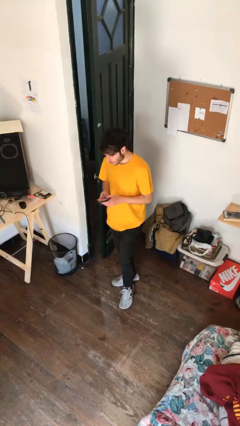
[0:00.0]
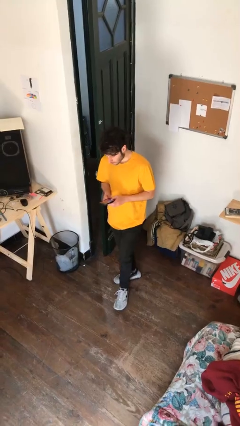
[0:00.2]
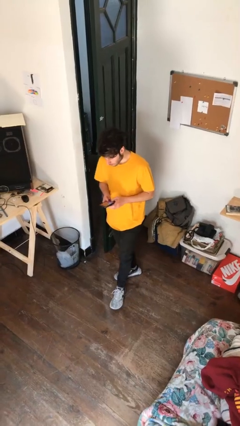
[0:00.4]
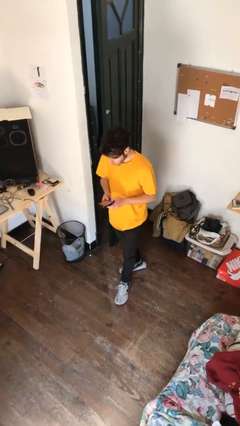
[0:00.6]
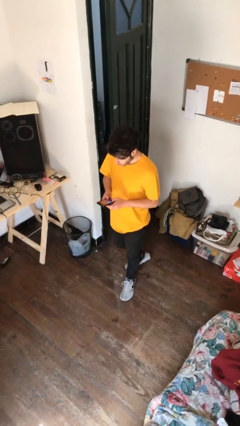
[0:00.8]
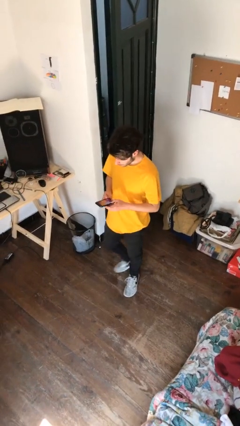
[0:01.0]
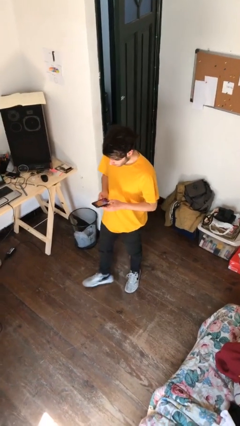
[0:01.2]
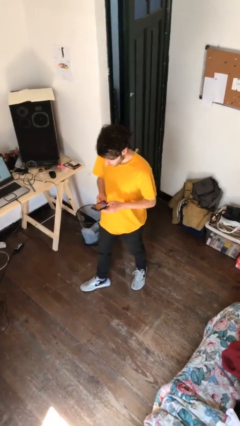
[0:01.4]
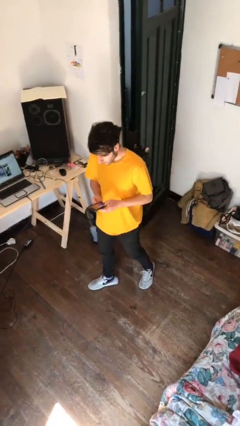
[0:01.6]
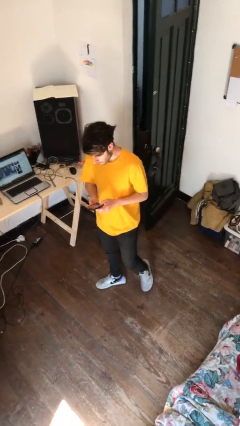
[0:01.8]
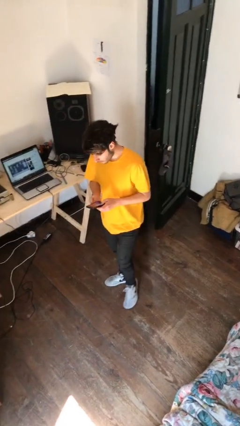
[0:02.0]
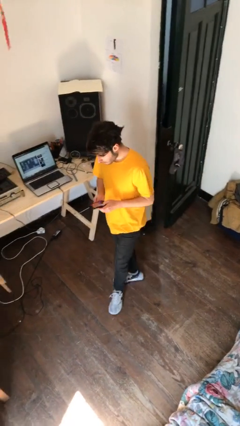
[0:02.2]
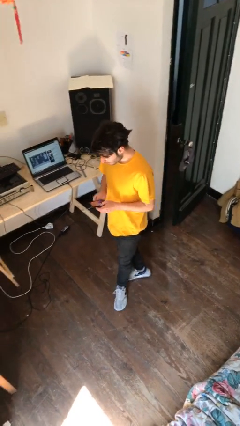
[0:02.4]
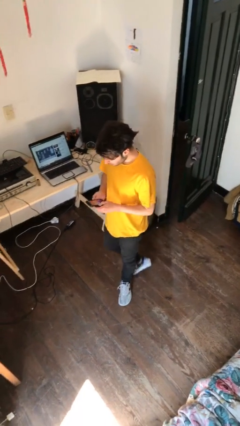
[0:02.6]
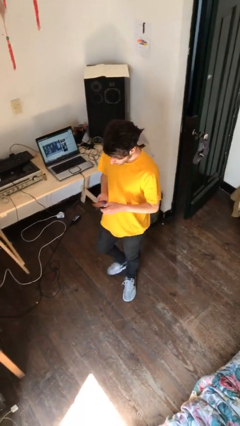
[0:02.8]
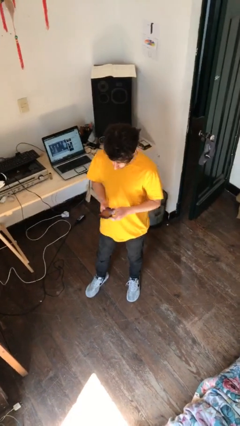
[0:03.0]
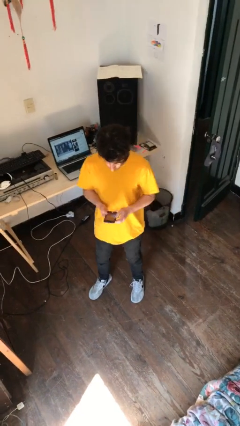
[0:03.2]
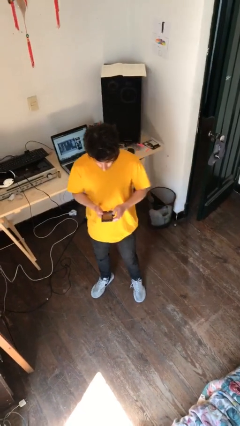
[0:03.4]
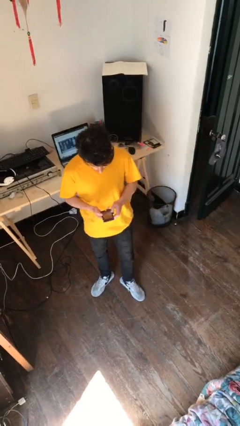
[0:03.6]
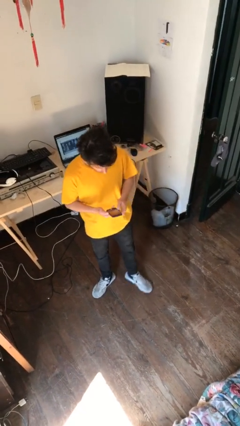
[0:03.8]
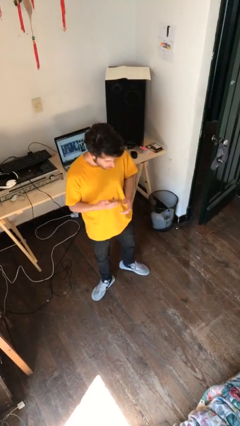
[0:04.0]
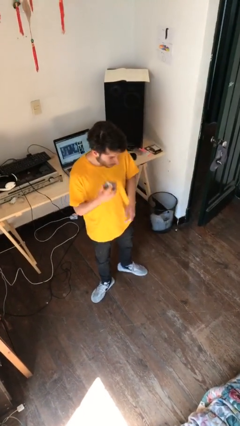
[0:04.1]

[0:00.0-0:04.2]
person texts on phone

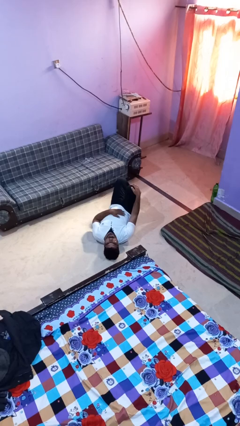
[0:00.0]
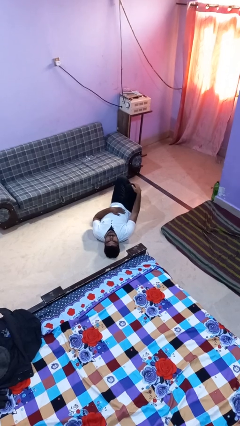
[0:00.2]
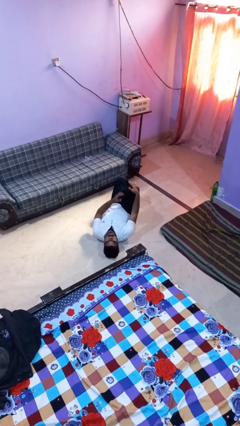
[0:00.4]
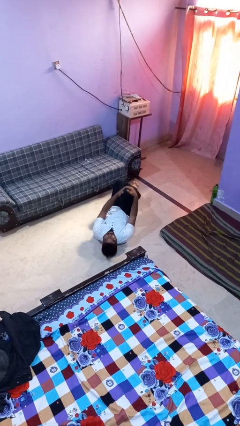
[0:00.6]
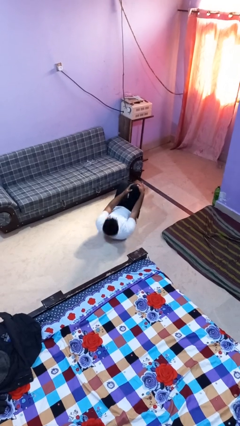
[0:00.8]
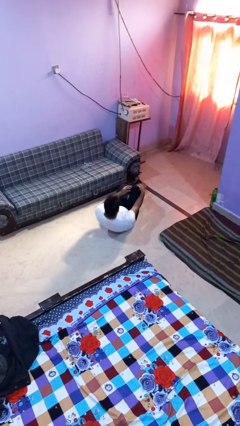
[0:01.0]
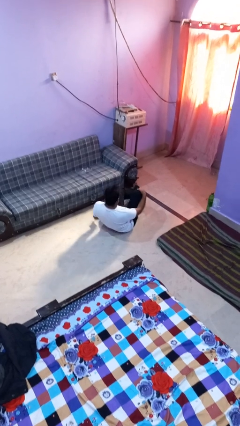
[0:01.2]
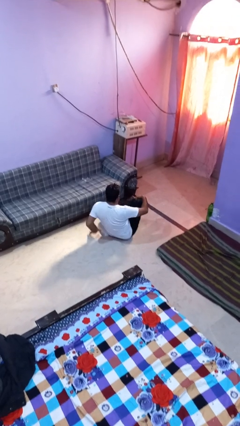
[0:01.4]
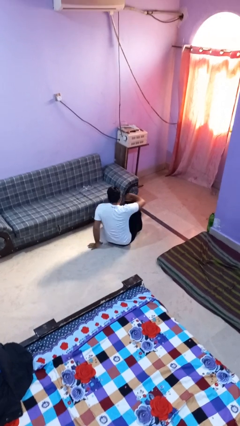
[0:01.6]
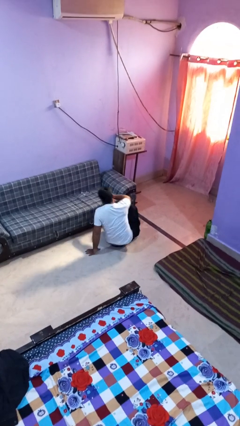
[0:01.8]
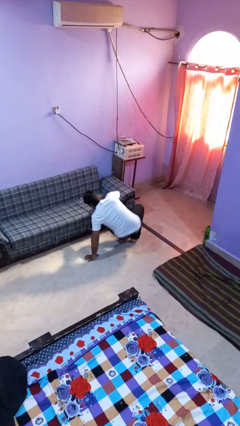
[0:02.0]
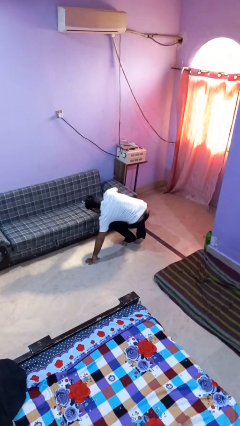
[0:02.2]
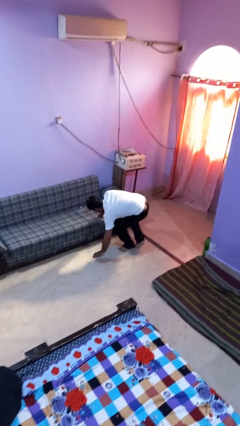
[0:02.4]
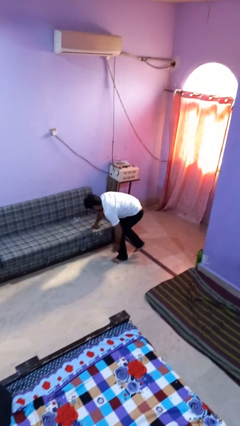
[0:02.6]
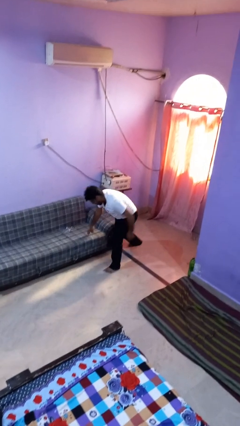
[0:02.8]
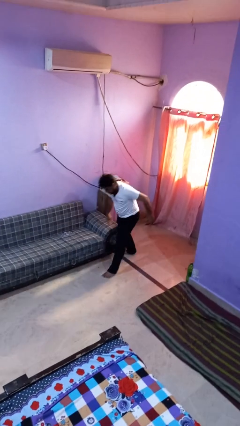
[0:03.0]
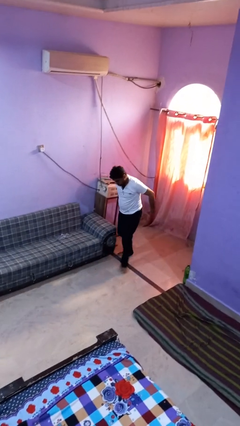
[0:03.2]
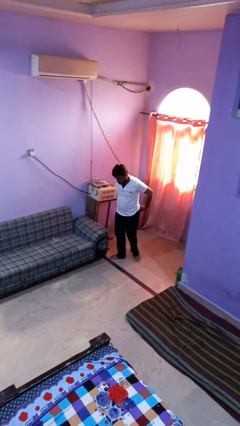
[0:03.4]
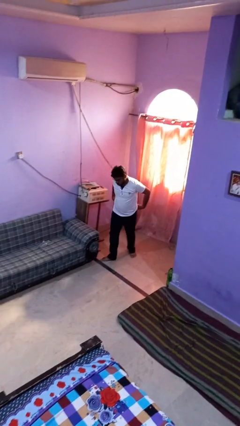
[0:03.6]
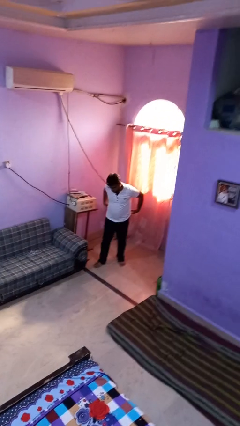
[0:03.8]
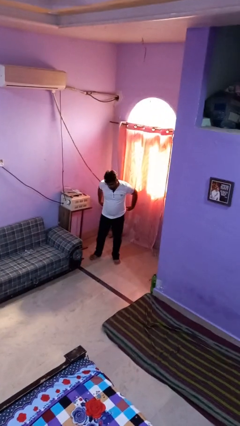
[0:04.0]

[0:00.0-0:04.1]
person stands up from floor

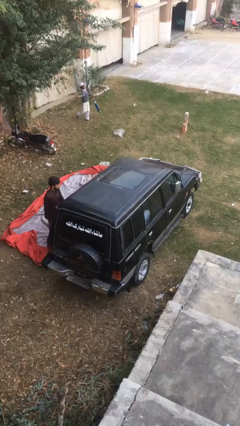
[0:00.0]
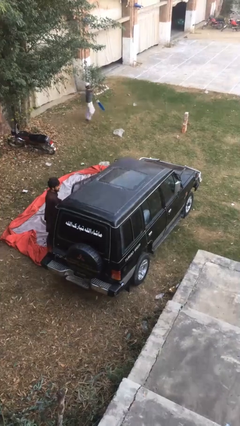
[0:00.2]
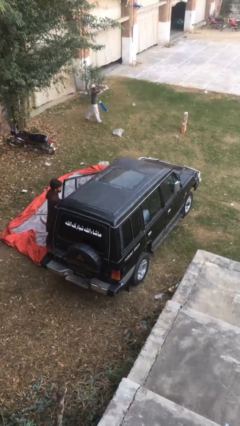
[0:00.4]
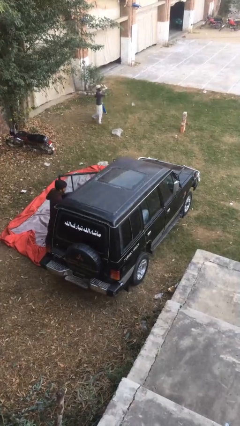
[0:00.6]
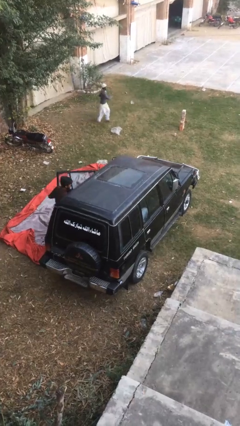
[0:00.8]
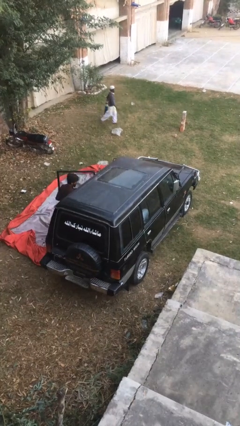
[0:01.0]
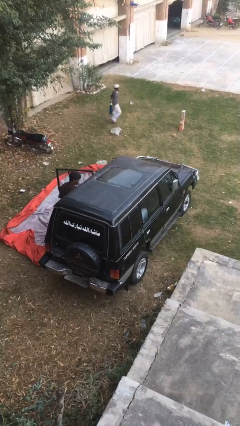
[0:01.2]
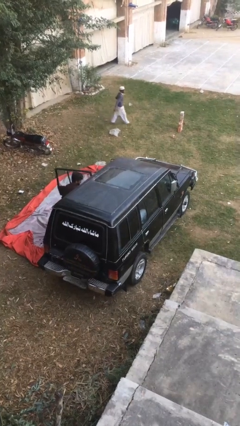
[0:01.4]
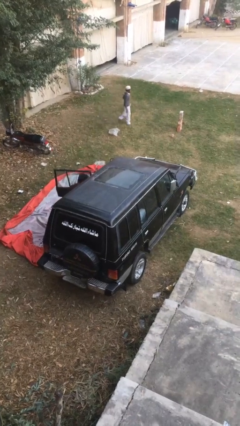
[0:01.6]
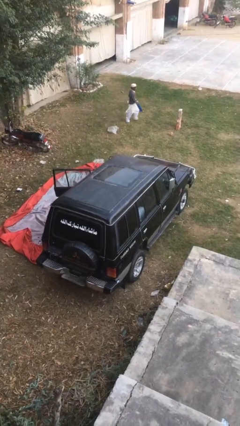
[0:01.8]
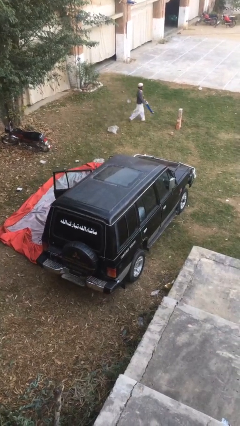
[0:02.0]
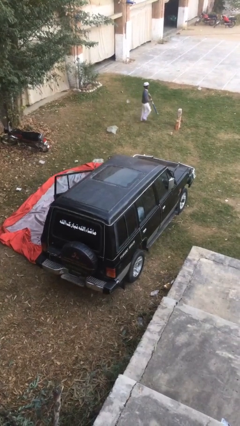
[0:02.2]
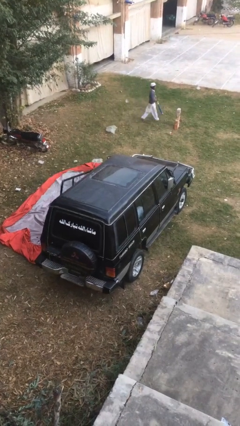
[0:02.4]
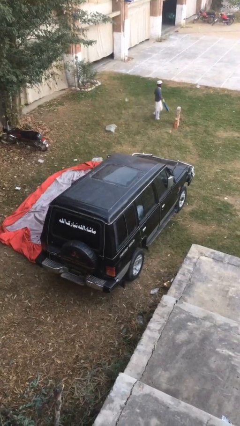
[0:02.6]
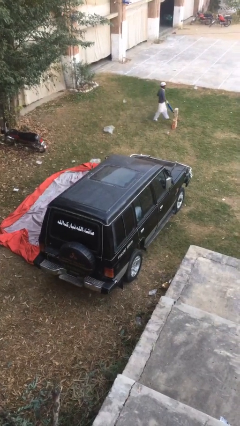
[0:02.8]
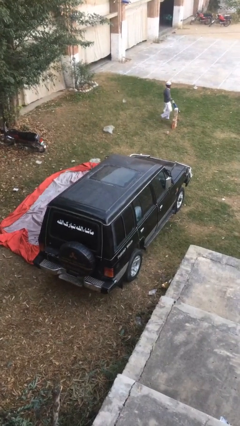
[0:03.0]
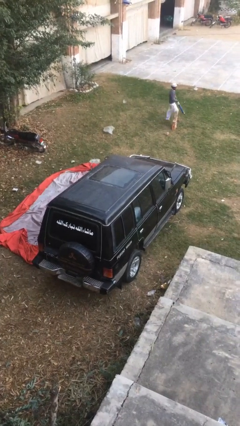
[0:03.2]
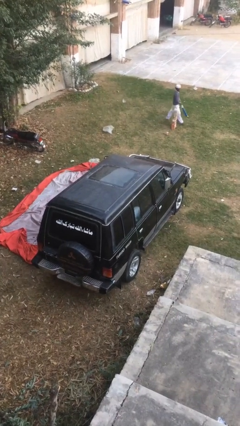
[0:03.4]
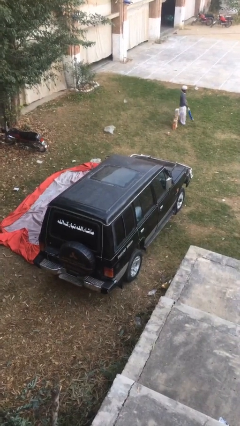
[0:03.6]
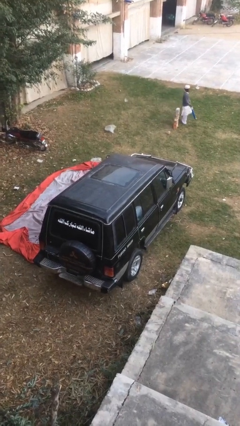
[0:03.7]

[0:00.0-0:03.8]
car picks up person

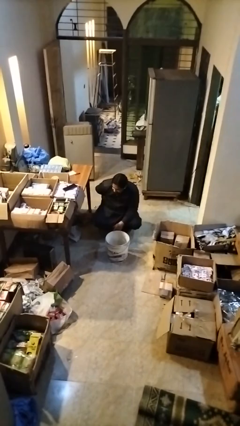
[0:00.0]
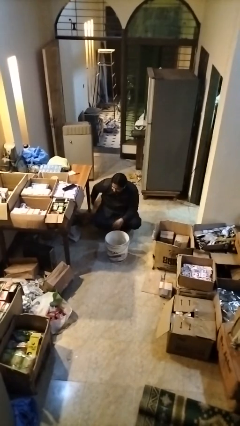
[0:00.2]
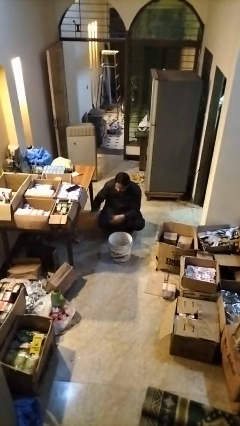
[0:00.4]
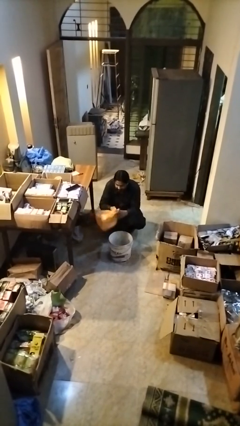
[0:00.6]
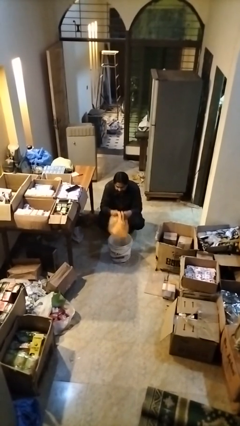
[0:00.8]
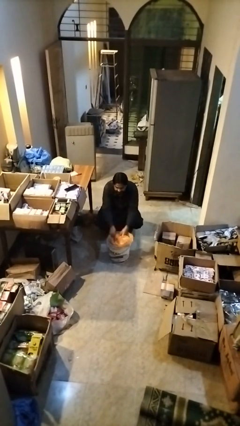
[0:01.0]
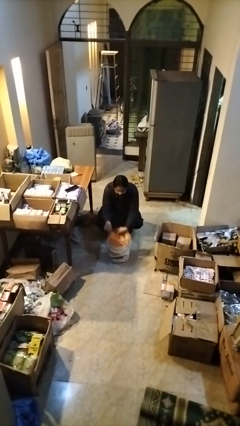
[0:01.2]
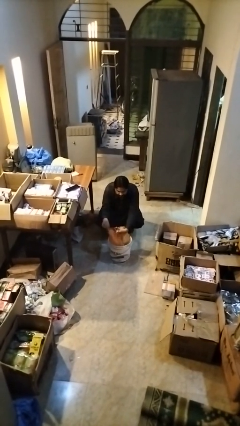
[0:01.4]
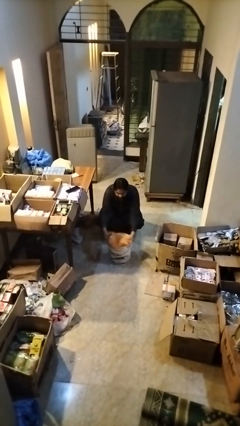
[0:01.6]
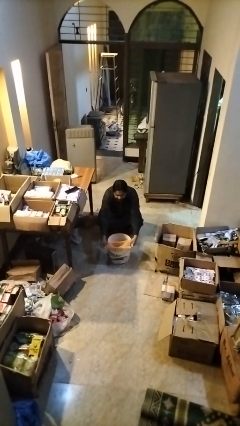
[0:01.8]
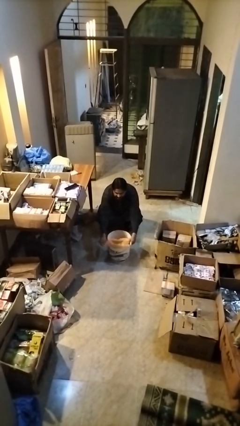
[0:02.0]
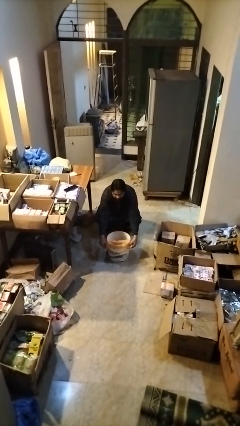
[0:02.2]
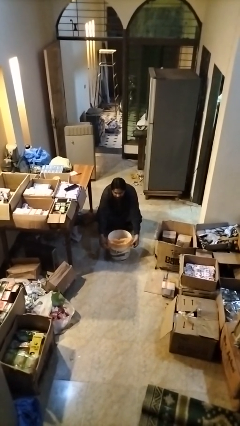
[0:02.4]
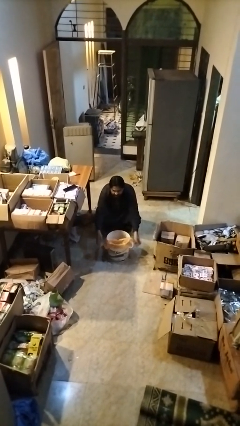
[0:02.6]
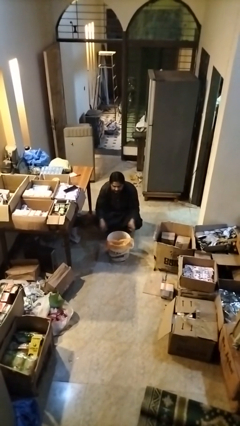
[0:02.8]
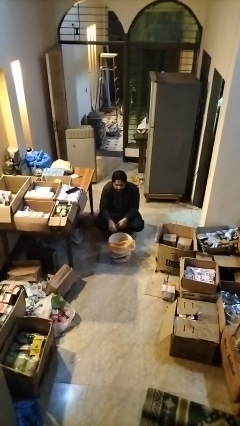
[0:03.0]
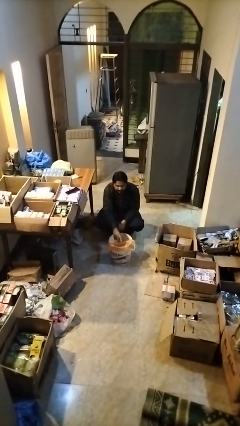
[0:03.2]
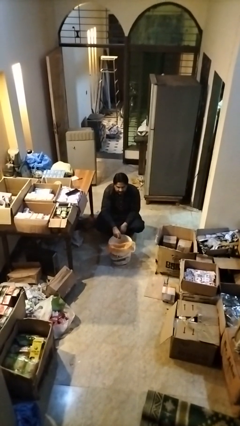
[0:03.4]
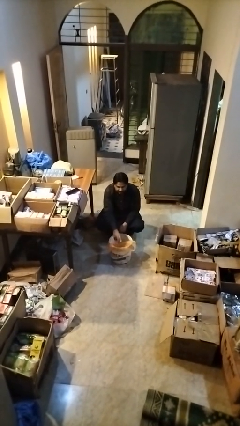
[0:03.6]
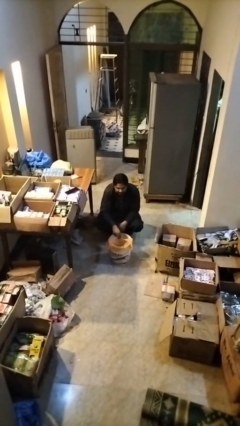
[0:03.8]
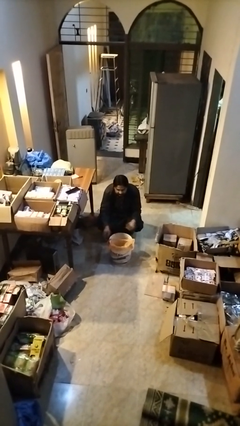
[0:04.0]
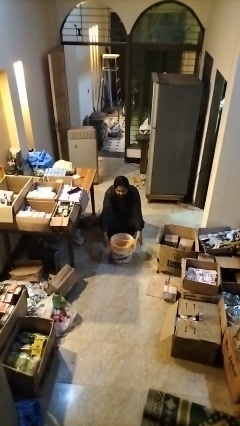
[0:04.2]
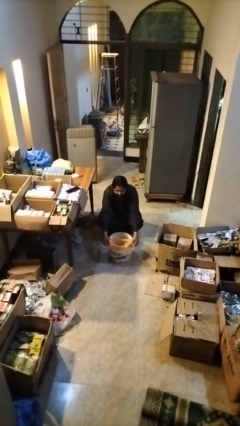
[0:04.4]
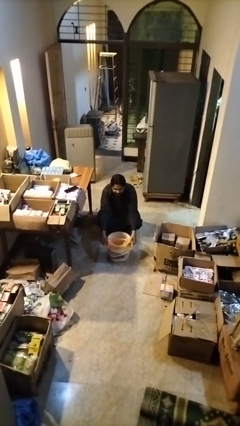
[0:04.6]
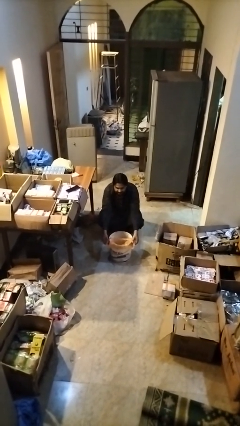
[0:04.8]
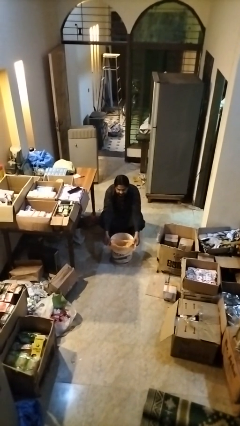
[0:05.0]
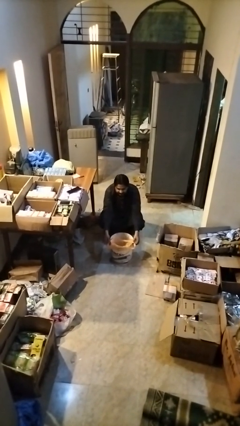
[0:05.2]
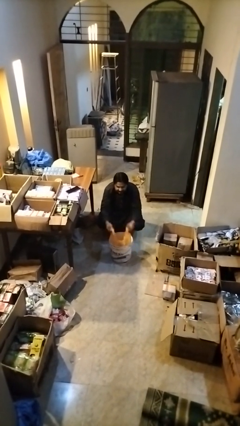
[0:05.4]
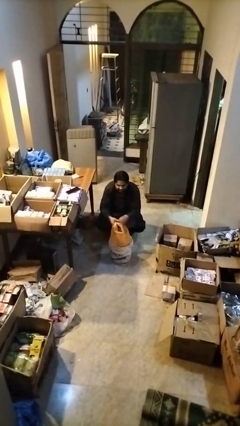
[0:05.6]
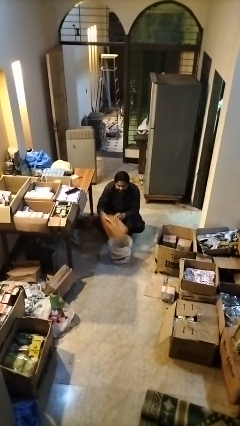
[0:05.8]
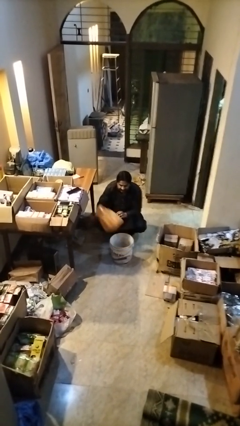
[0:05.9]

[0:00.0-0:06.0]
person inserts trashbag into trashcan
